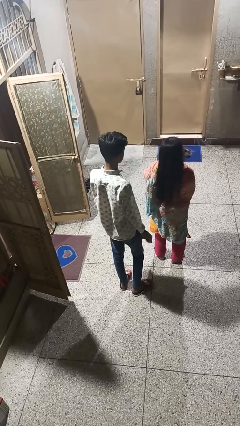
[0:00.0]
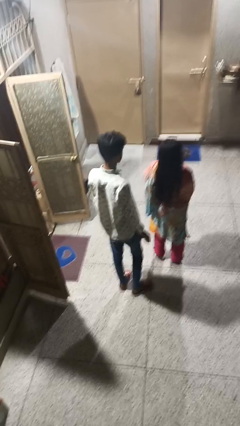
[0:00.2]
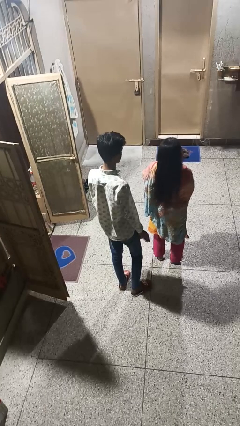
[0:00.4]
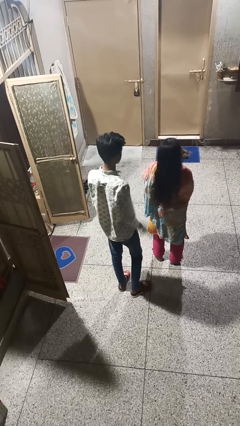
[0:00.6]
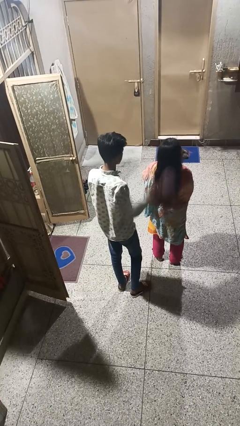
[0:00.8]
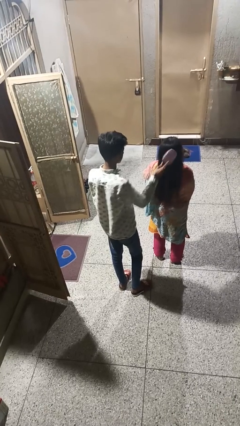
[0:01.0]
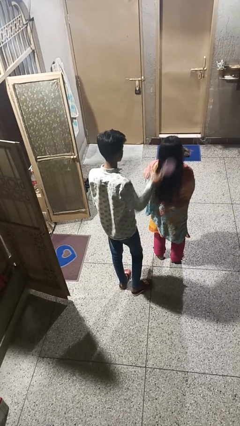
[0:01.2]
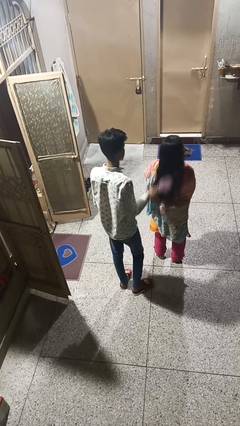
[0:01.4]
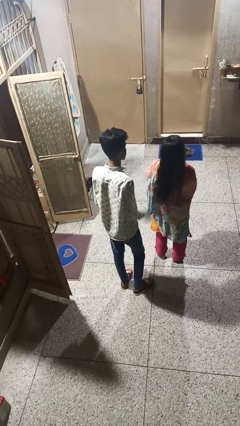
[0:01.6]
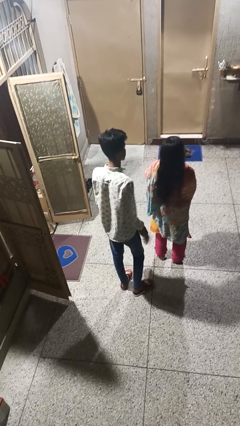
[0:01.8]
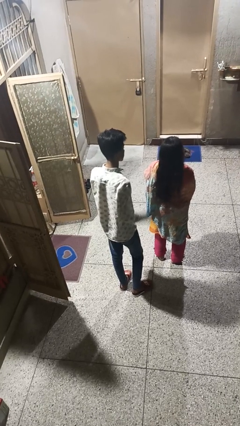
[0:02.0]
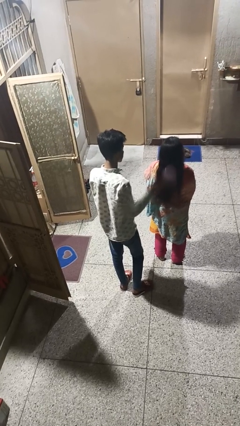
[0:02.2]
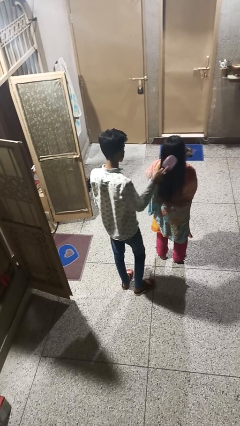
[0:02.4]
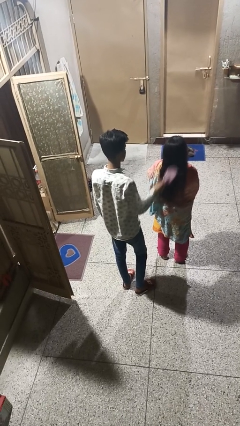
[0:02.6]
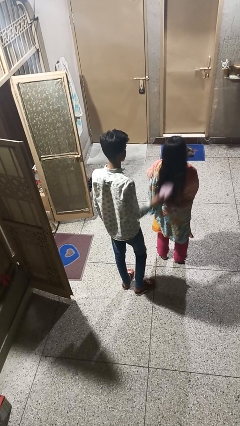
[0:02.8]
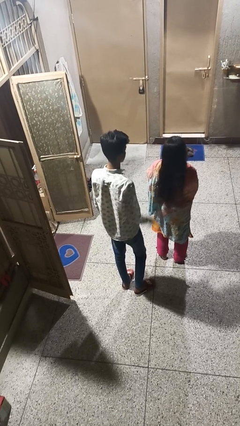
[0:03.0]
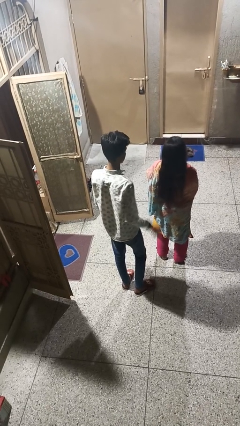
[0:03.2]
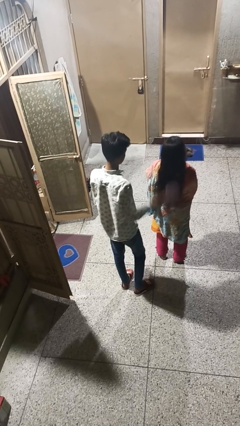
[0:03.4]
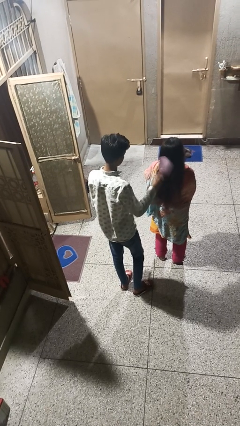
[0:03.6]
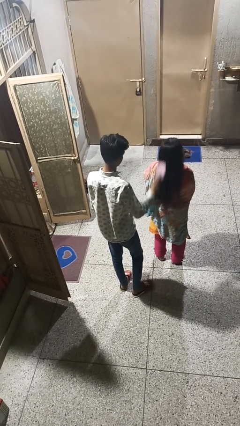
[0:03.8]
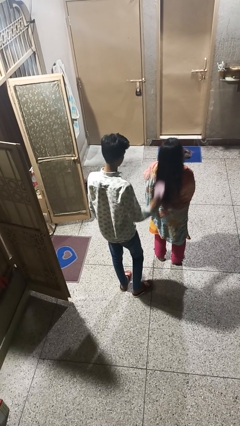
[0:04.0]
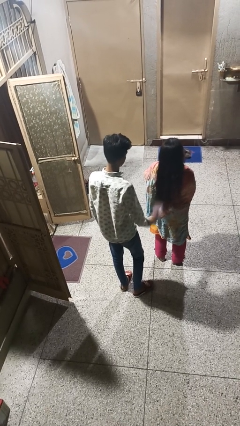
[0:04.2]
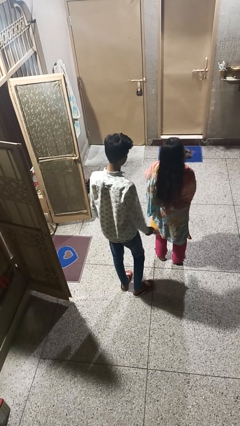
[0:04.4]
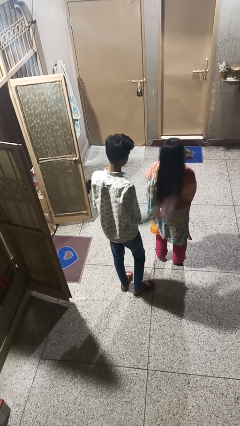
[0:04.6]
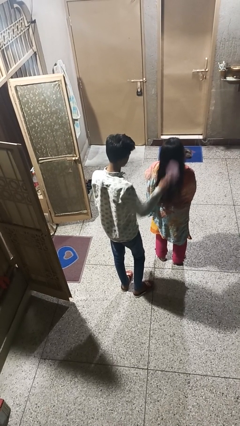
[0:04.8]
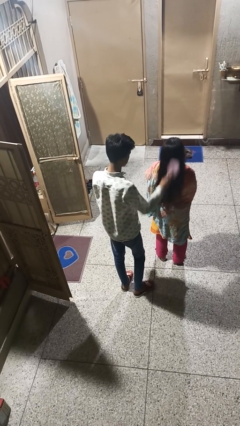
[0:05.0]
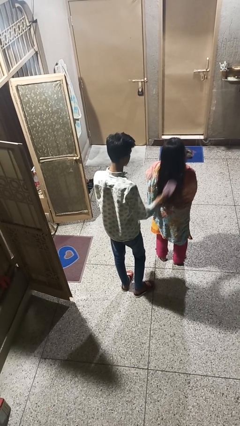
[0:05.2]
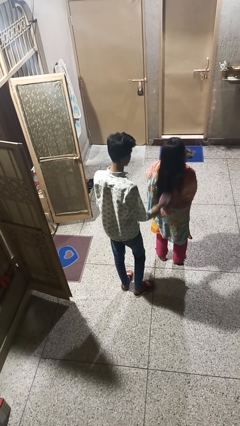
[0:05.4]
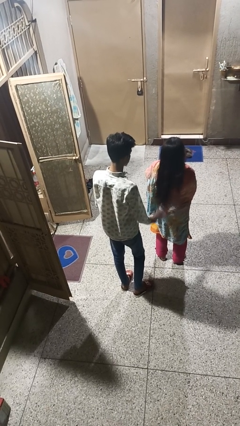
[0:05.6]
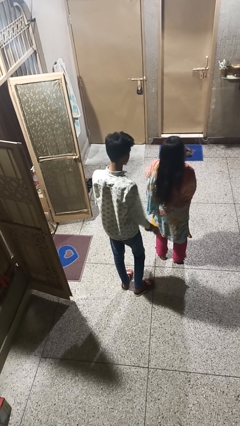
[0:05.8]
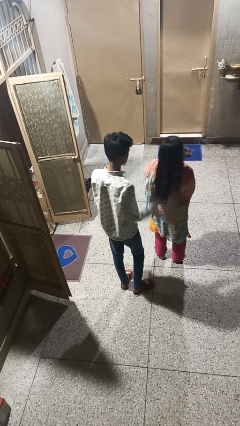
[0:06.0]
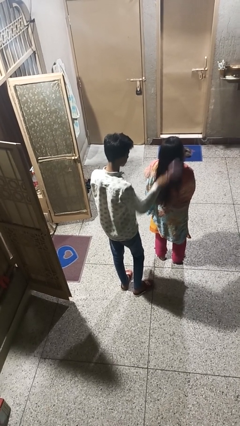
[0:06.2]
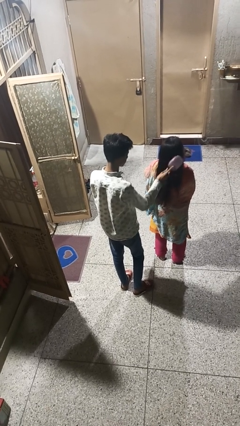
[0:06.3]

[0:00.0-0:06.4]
person brushes hair of person

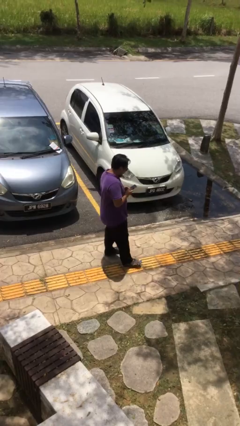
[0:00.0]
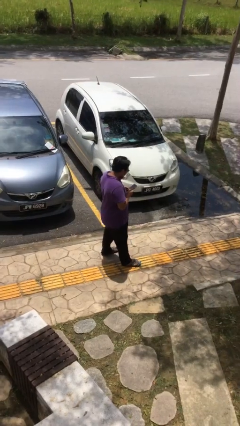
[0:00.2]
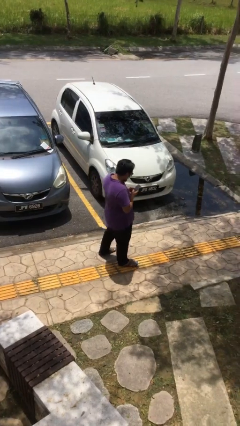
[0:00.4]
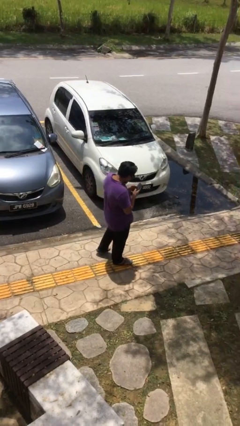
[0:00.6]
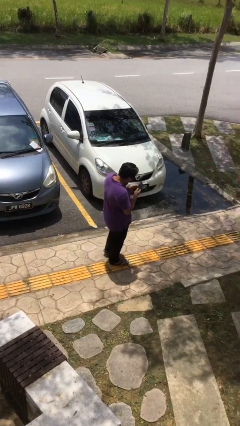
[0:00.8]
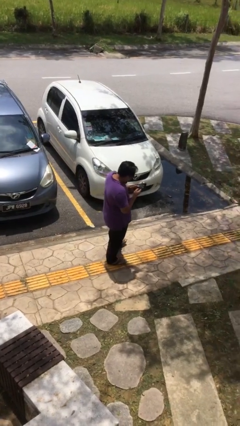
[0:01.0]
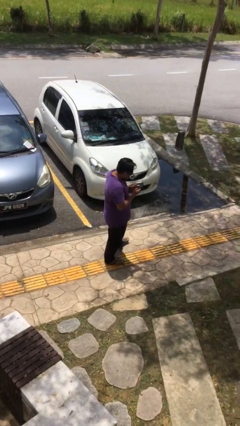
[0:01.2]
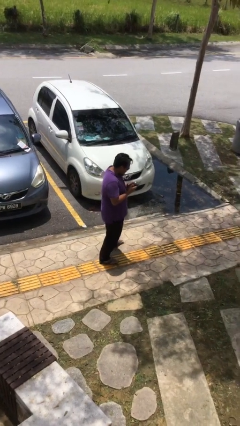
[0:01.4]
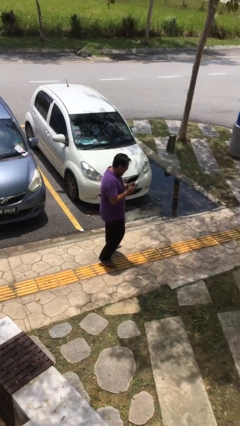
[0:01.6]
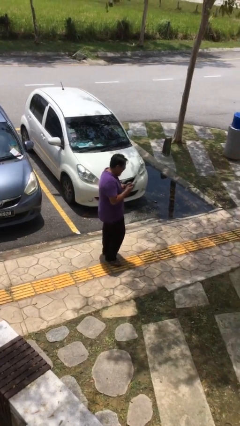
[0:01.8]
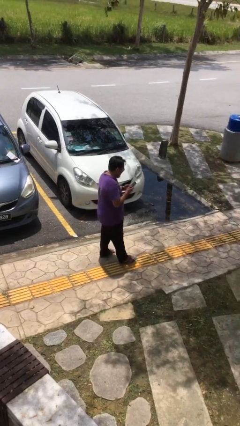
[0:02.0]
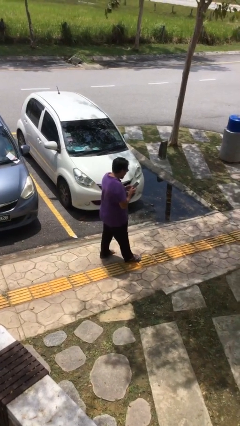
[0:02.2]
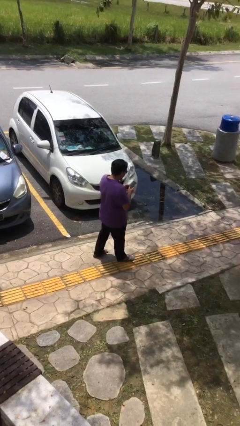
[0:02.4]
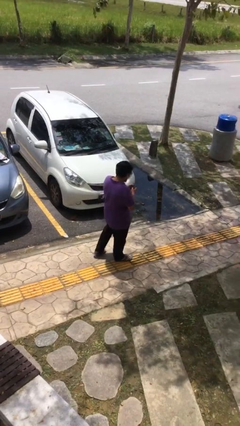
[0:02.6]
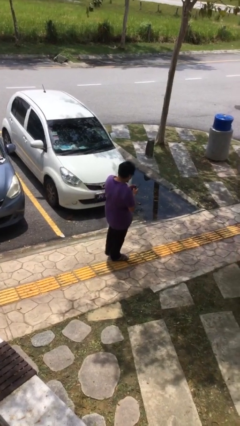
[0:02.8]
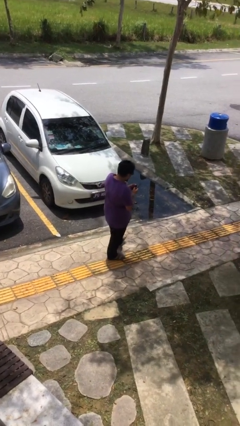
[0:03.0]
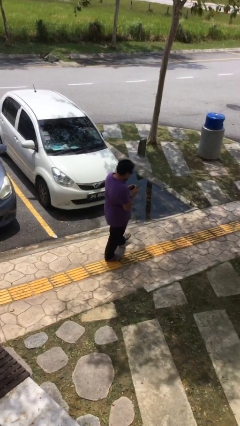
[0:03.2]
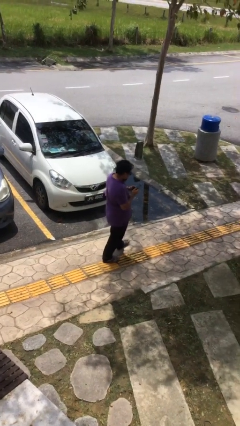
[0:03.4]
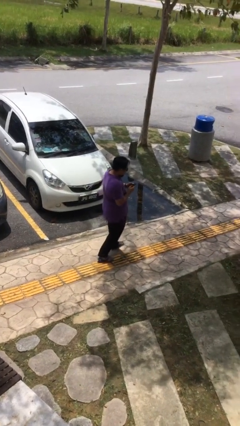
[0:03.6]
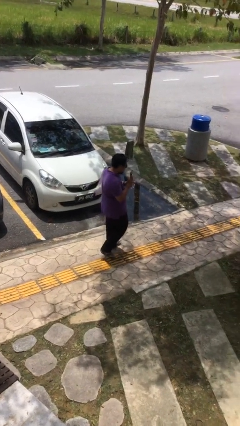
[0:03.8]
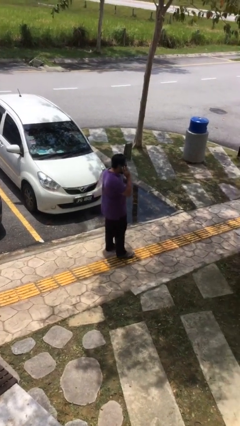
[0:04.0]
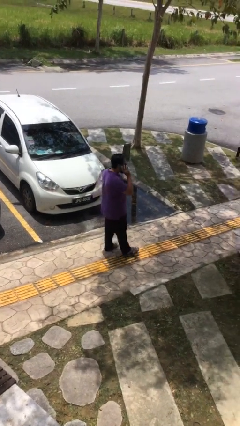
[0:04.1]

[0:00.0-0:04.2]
person texts on phone

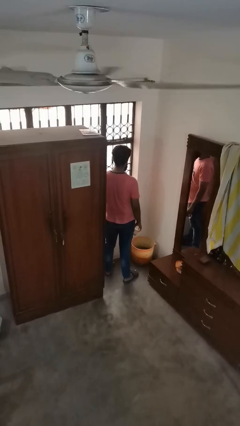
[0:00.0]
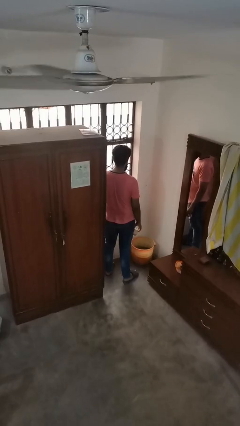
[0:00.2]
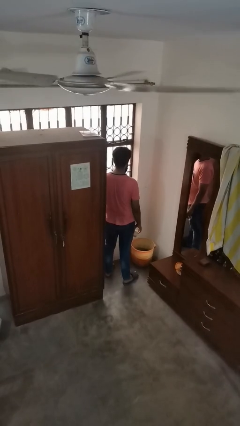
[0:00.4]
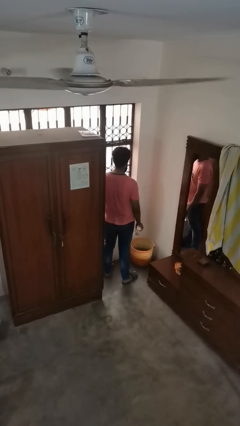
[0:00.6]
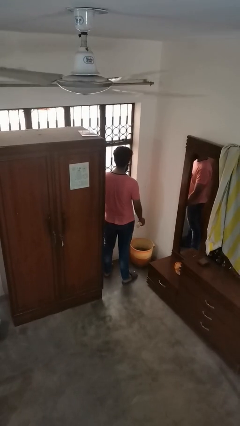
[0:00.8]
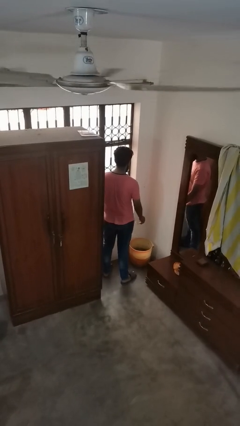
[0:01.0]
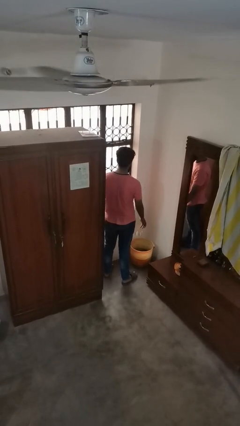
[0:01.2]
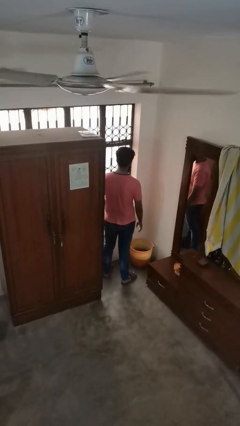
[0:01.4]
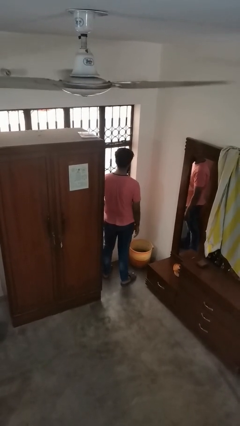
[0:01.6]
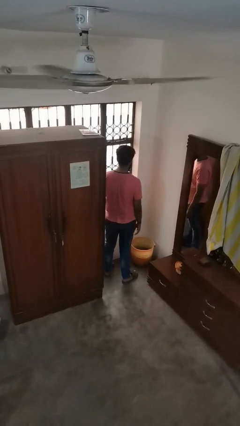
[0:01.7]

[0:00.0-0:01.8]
person discards trash

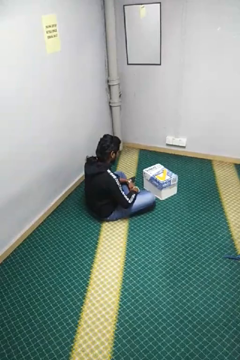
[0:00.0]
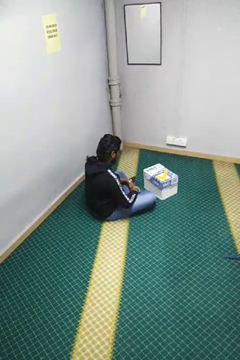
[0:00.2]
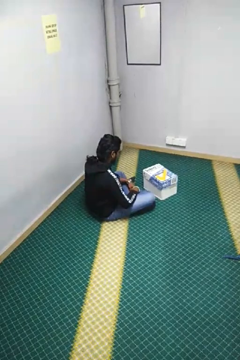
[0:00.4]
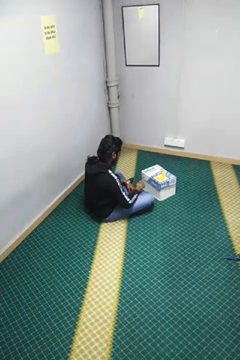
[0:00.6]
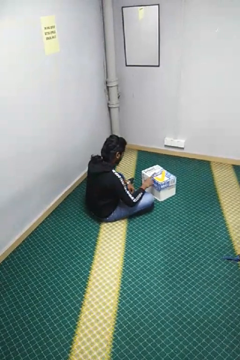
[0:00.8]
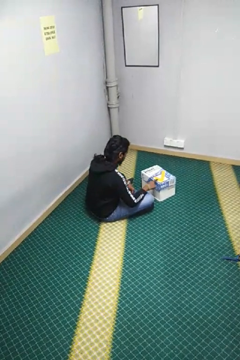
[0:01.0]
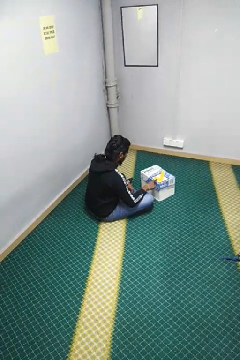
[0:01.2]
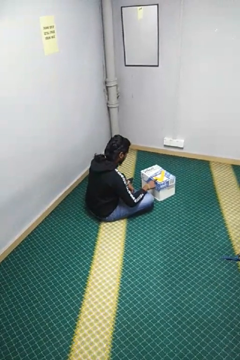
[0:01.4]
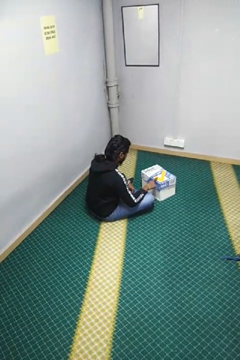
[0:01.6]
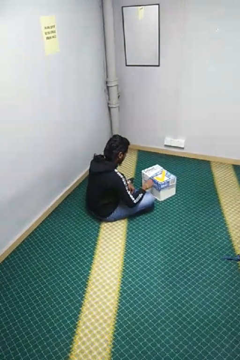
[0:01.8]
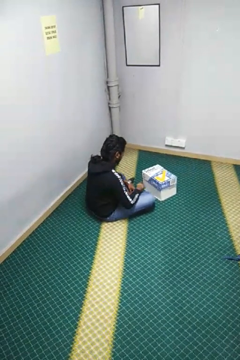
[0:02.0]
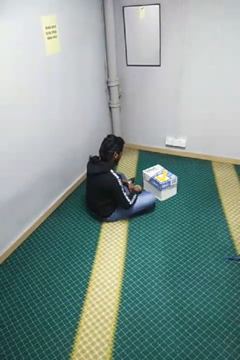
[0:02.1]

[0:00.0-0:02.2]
person taps object with finger

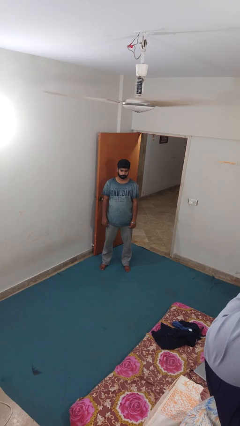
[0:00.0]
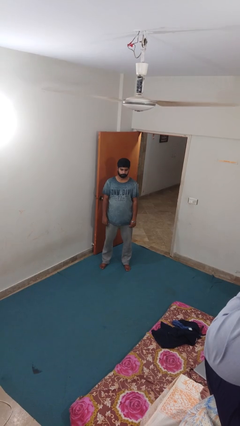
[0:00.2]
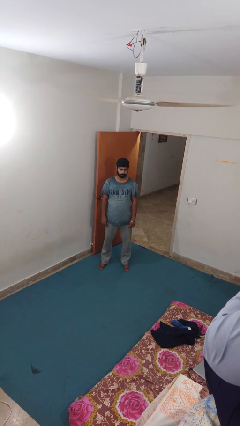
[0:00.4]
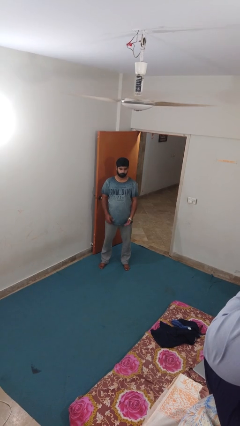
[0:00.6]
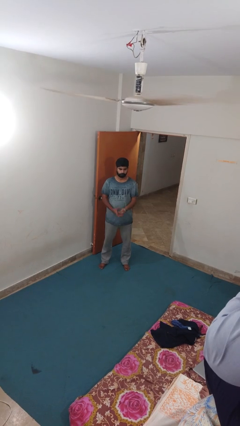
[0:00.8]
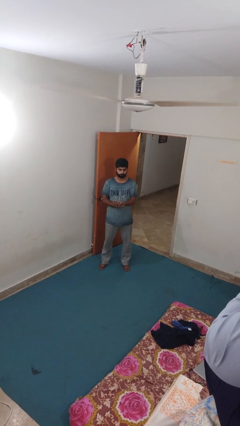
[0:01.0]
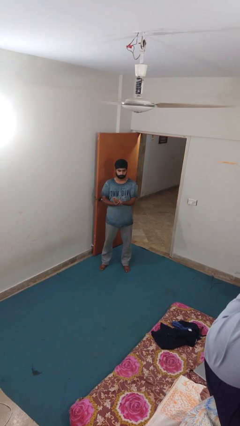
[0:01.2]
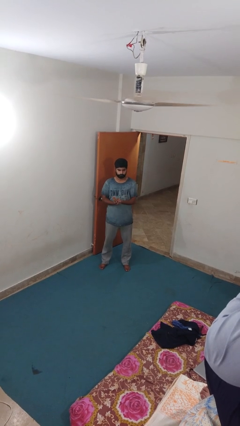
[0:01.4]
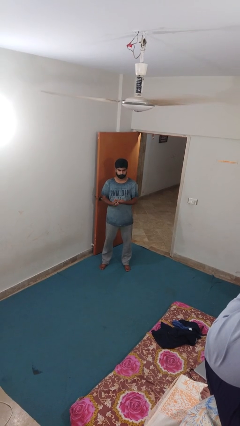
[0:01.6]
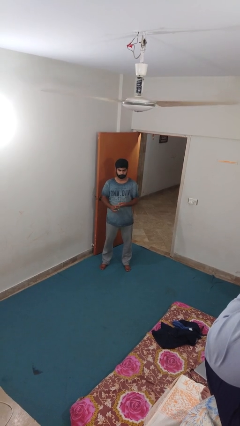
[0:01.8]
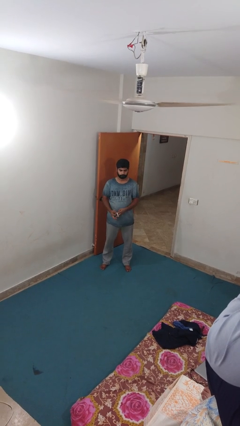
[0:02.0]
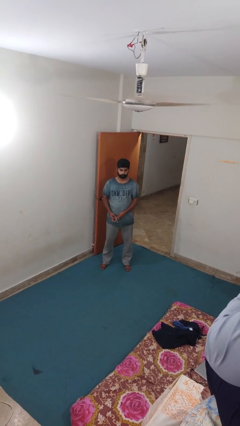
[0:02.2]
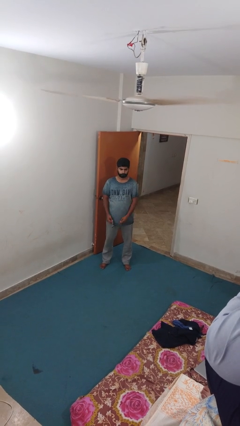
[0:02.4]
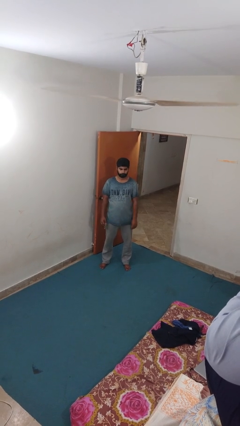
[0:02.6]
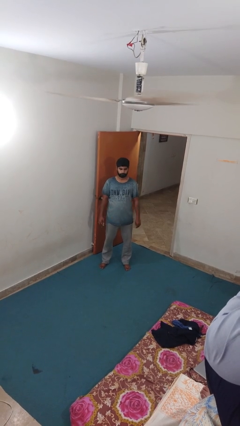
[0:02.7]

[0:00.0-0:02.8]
person takes off wristwatch

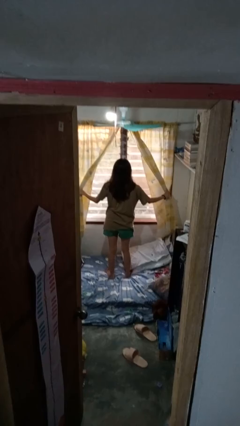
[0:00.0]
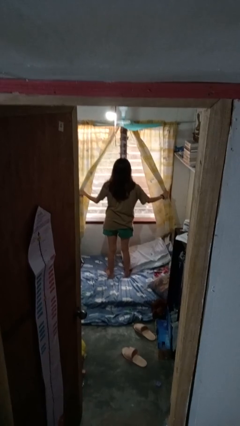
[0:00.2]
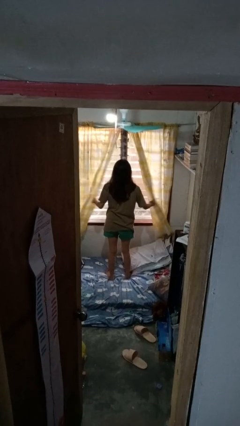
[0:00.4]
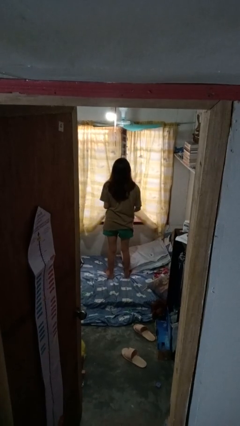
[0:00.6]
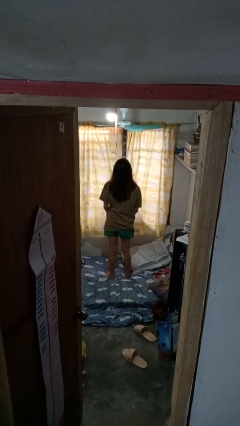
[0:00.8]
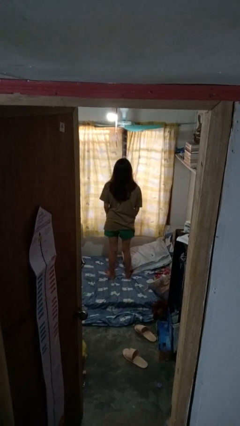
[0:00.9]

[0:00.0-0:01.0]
person closes curtains
